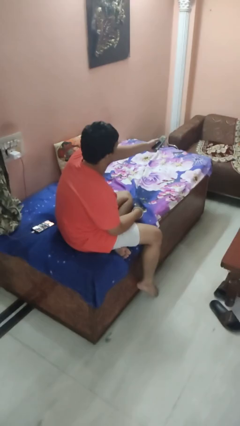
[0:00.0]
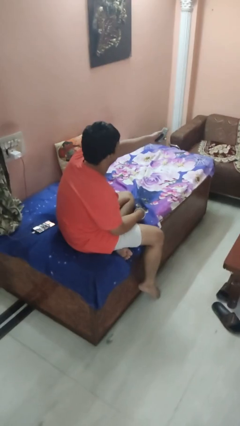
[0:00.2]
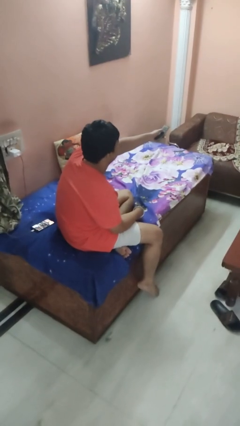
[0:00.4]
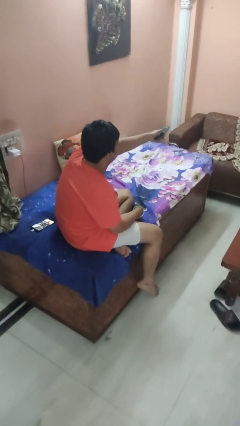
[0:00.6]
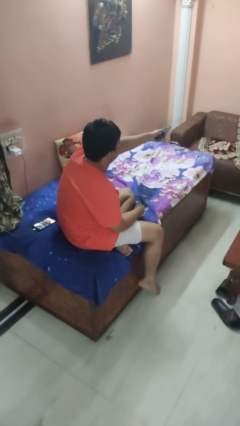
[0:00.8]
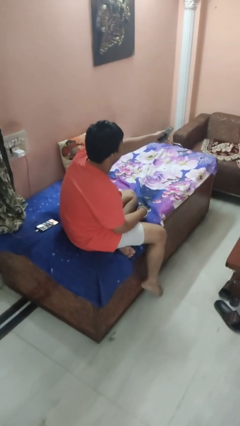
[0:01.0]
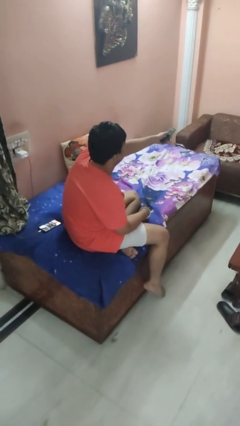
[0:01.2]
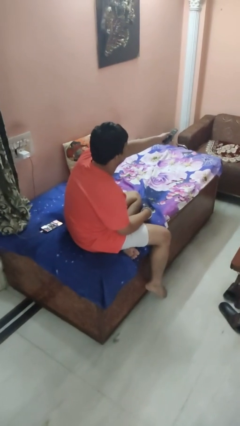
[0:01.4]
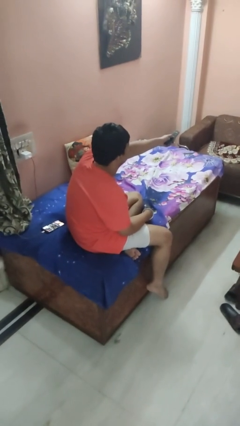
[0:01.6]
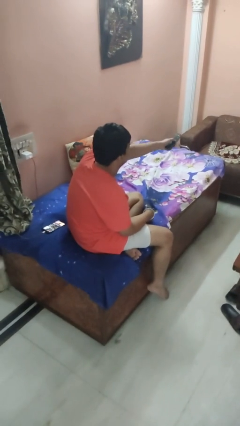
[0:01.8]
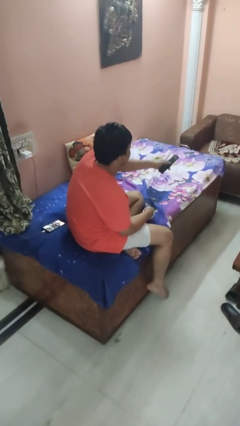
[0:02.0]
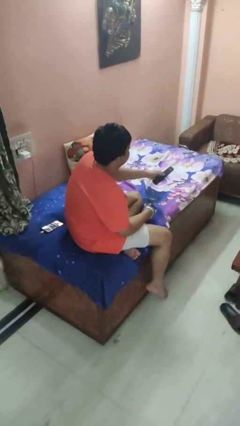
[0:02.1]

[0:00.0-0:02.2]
person uses television remote

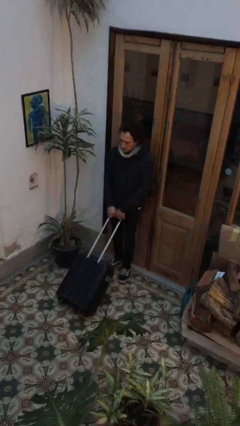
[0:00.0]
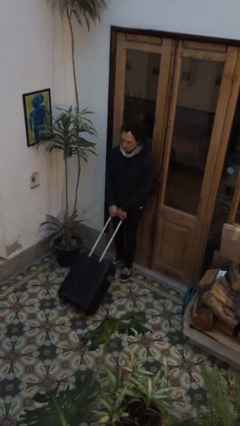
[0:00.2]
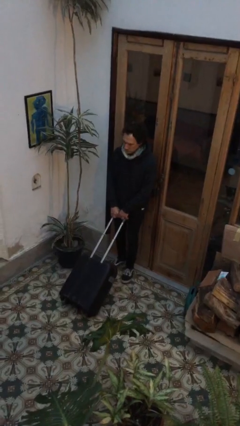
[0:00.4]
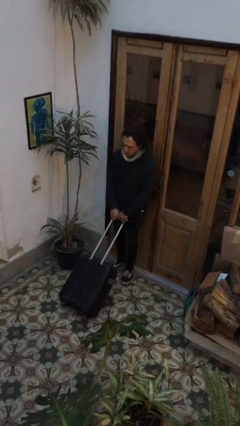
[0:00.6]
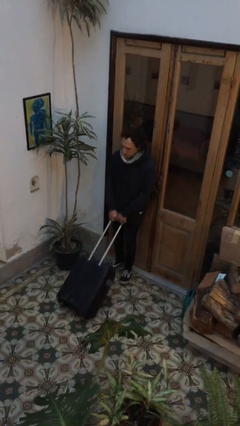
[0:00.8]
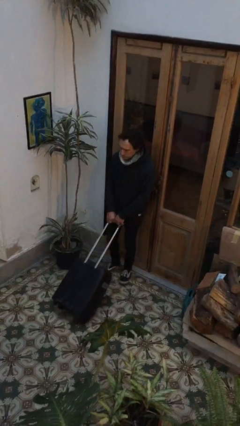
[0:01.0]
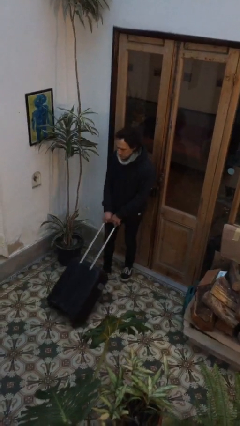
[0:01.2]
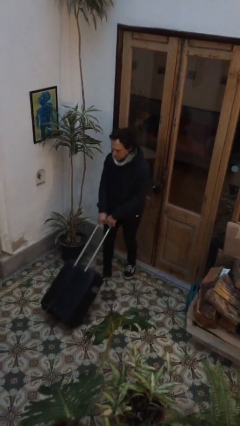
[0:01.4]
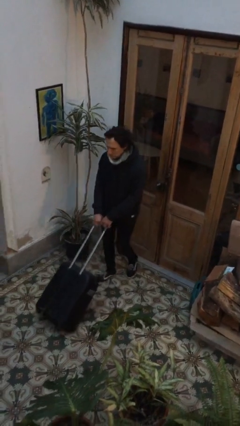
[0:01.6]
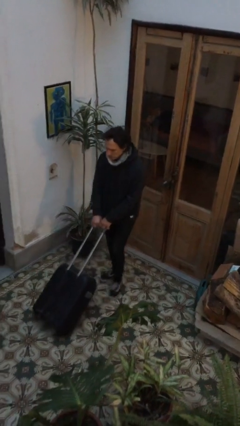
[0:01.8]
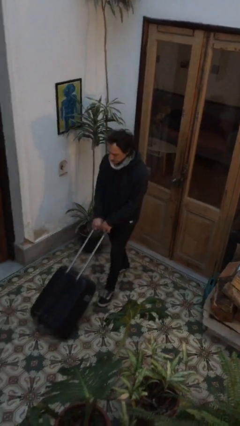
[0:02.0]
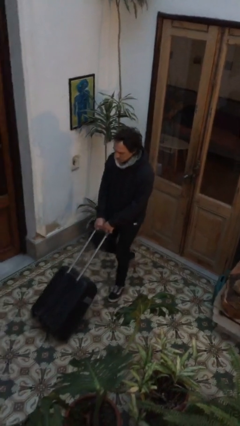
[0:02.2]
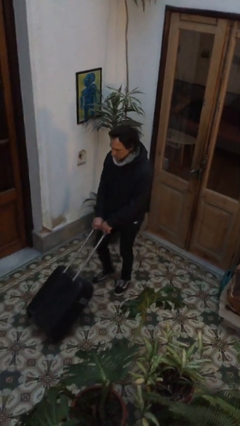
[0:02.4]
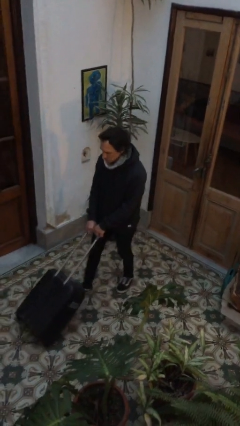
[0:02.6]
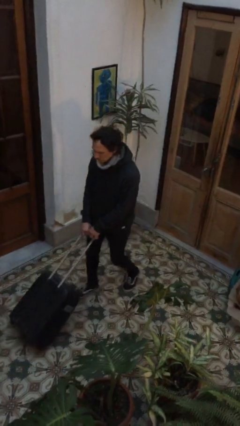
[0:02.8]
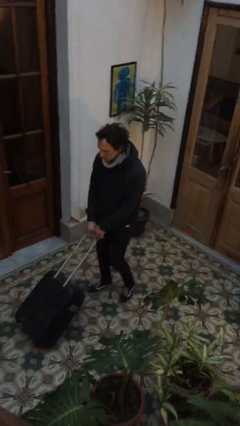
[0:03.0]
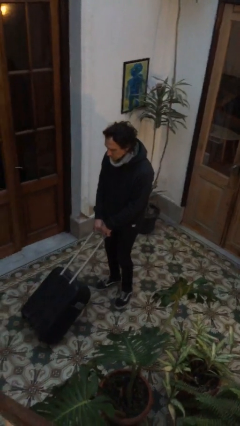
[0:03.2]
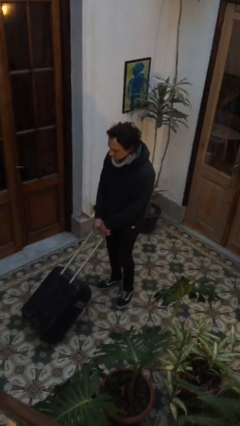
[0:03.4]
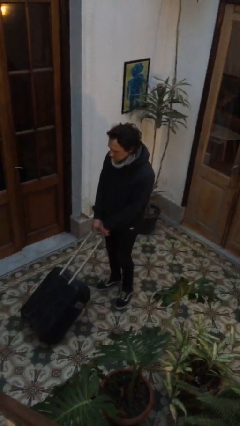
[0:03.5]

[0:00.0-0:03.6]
person pushes wheeled cart

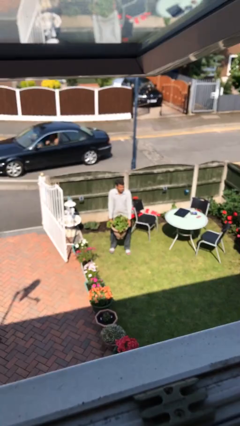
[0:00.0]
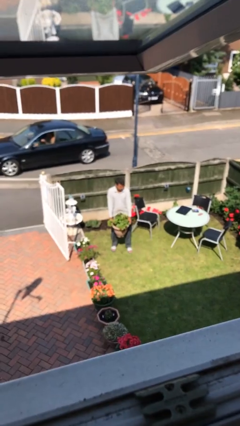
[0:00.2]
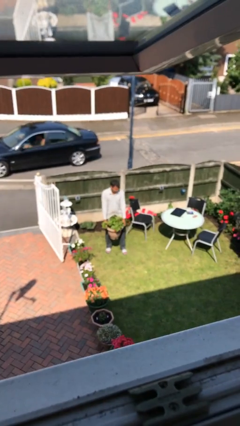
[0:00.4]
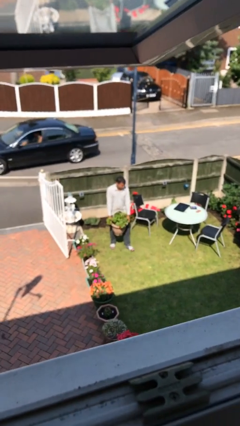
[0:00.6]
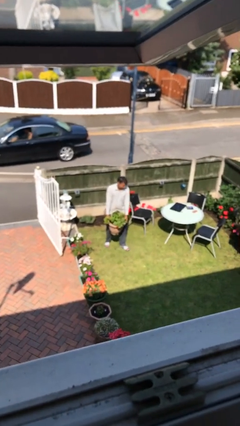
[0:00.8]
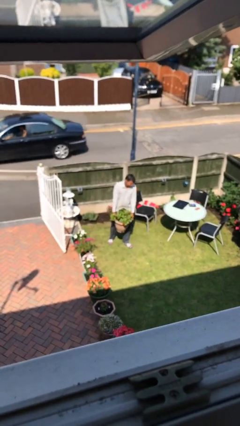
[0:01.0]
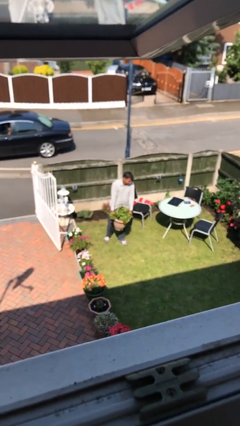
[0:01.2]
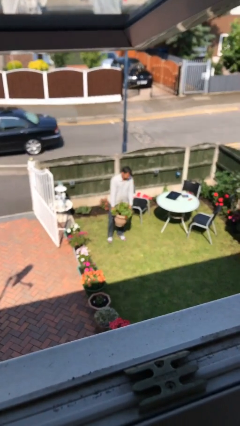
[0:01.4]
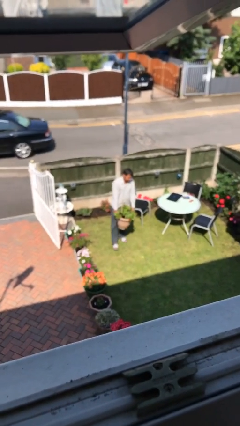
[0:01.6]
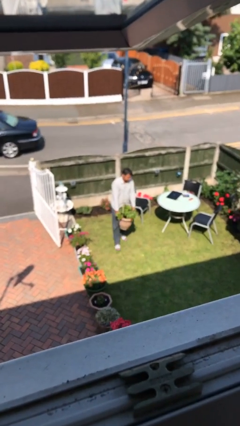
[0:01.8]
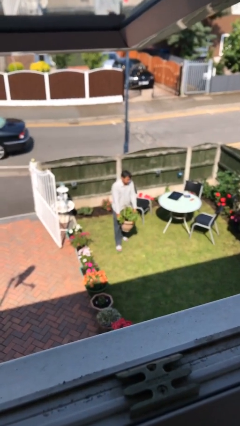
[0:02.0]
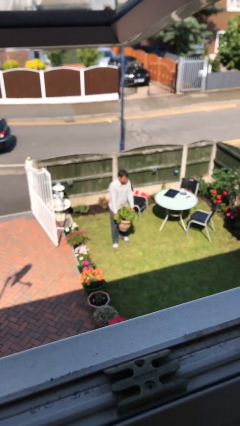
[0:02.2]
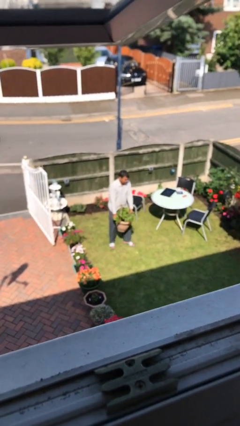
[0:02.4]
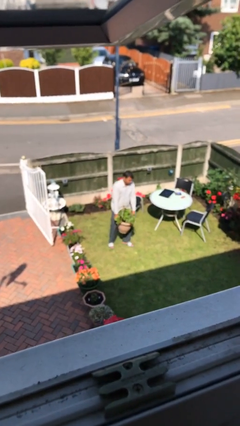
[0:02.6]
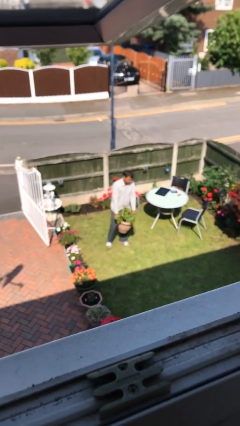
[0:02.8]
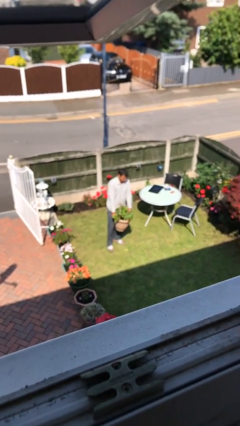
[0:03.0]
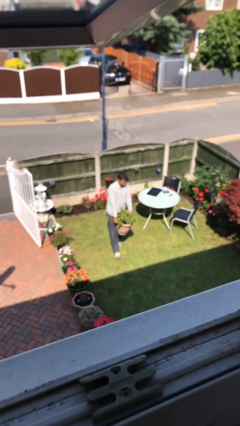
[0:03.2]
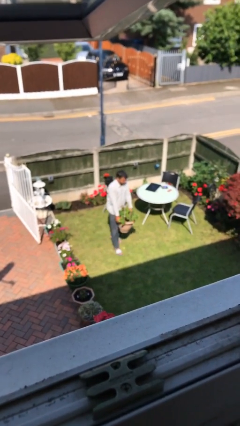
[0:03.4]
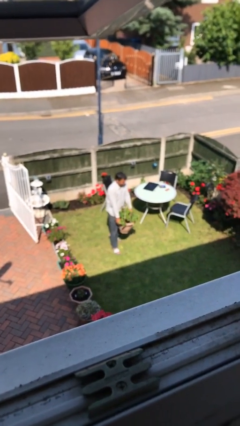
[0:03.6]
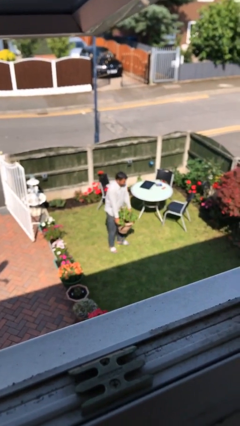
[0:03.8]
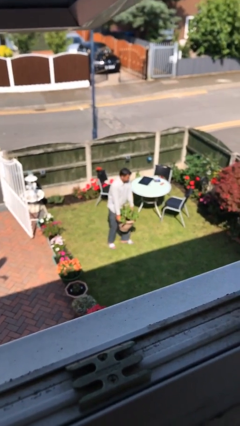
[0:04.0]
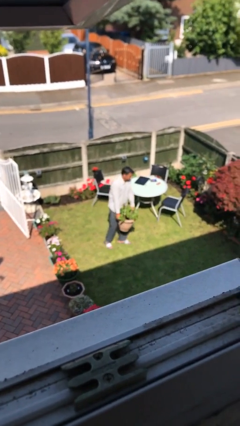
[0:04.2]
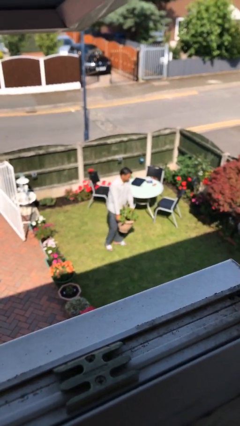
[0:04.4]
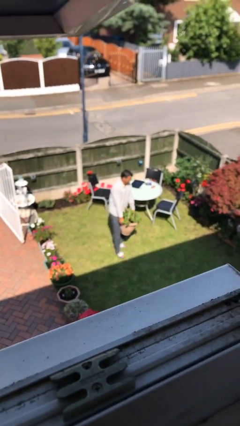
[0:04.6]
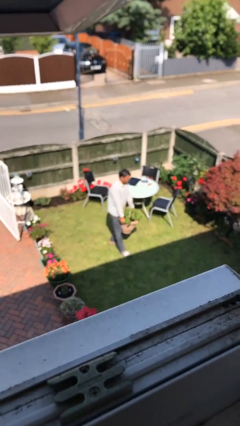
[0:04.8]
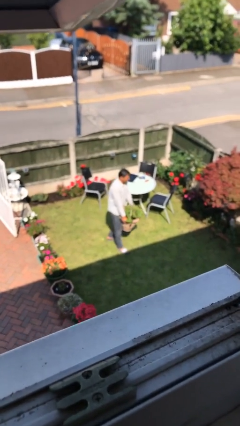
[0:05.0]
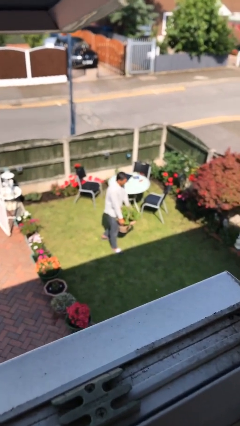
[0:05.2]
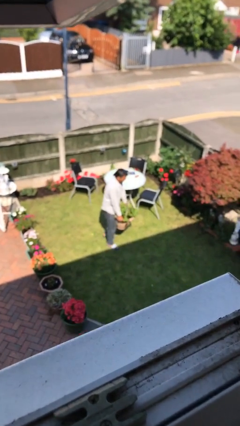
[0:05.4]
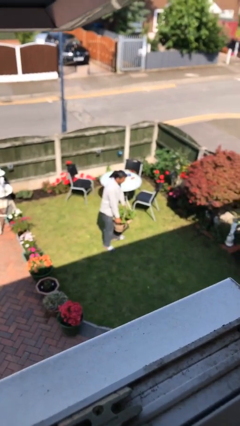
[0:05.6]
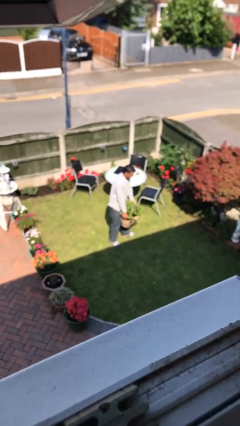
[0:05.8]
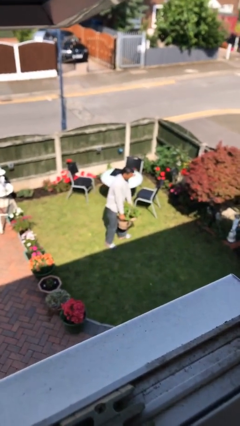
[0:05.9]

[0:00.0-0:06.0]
person carries heavy object

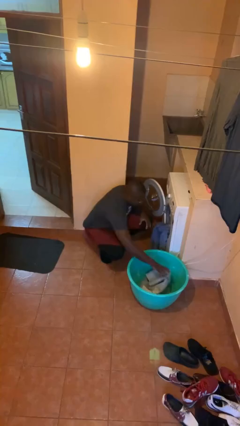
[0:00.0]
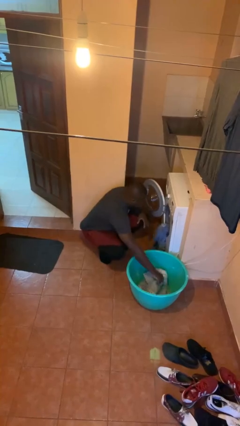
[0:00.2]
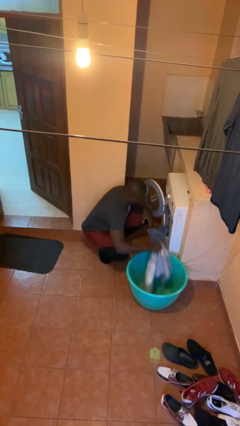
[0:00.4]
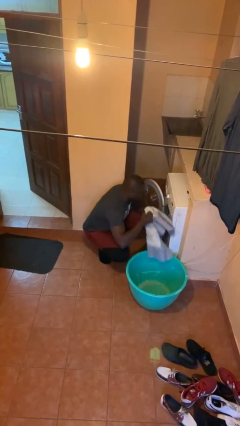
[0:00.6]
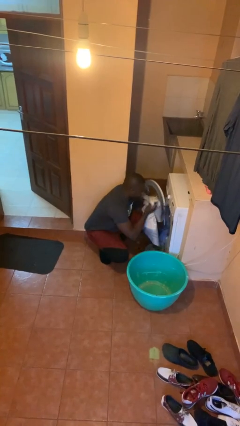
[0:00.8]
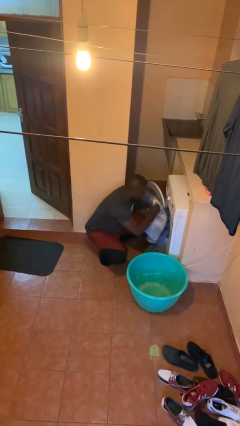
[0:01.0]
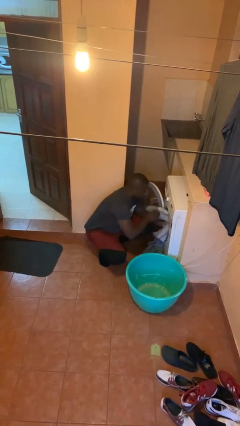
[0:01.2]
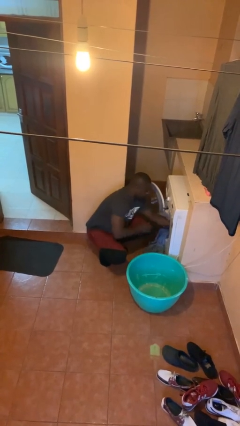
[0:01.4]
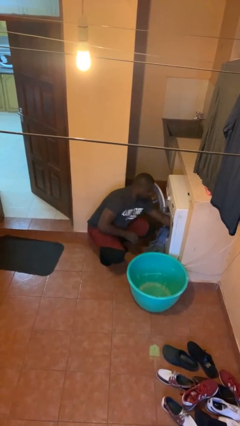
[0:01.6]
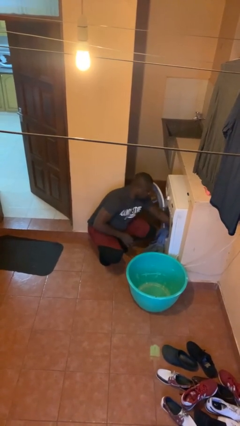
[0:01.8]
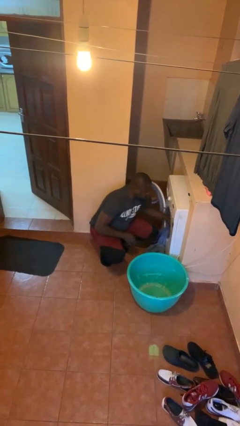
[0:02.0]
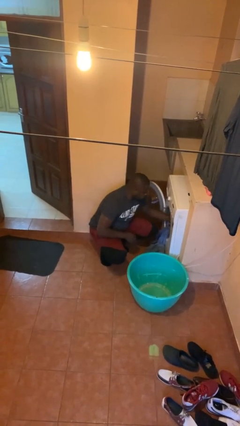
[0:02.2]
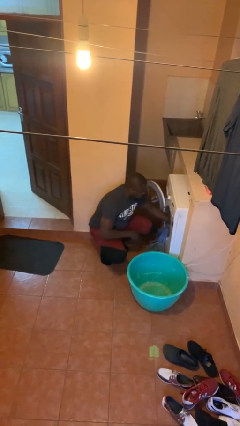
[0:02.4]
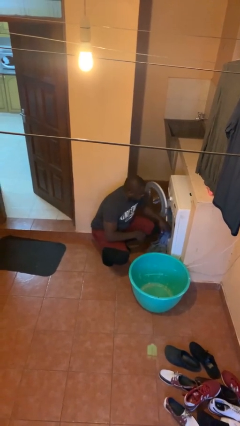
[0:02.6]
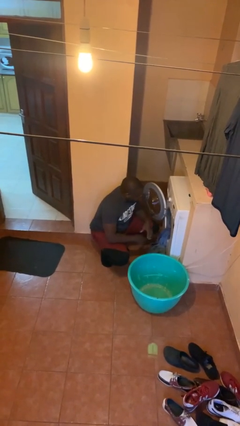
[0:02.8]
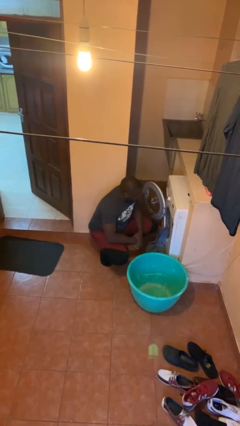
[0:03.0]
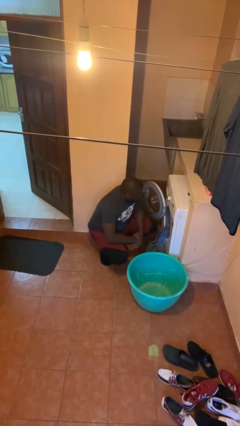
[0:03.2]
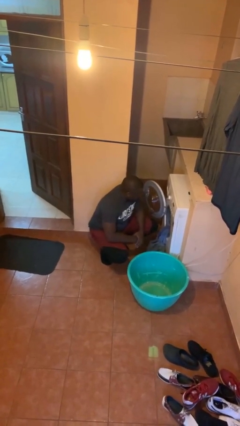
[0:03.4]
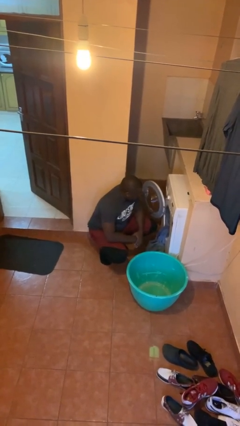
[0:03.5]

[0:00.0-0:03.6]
person loads clotheswasher

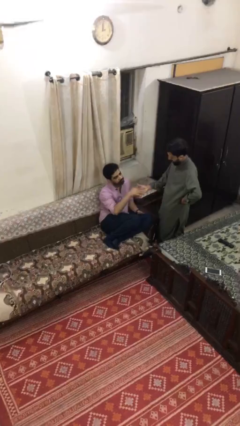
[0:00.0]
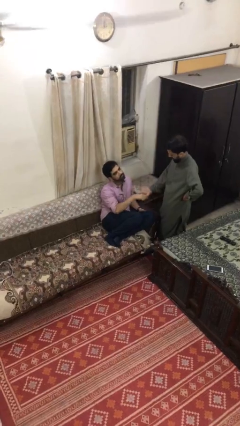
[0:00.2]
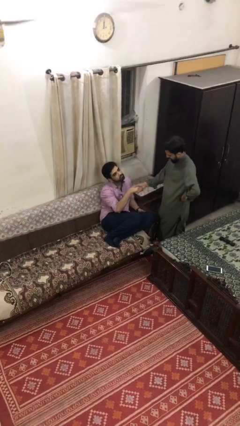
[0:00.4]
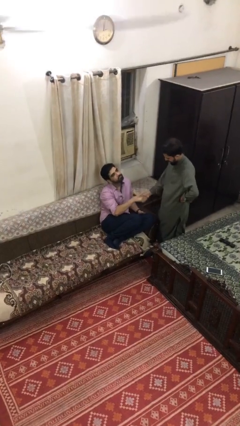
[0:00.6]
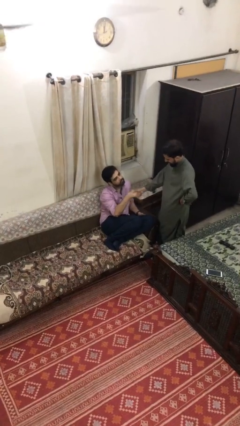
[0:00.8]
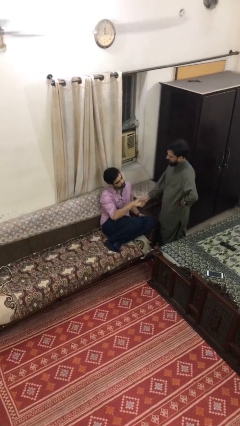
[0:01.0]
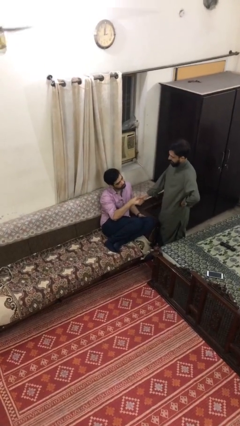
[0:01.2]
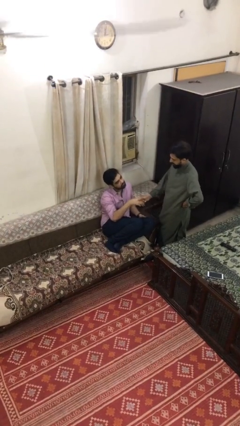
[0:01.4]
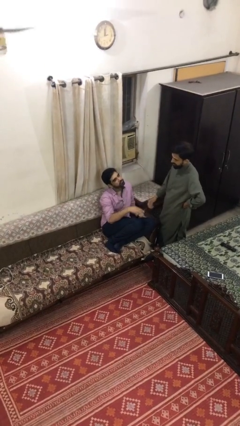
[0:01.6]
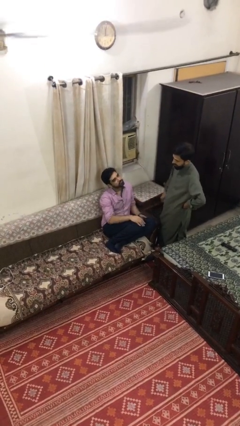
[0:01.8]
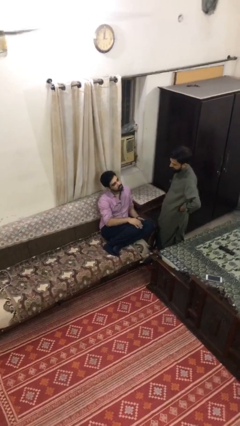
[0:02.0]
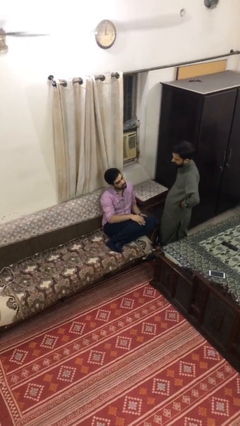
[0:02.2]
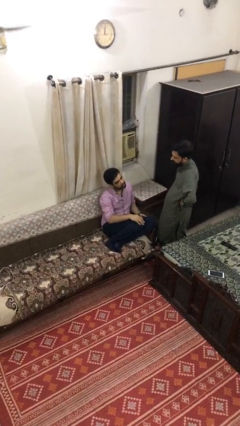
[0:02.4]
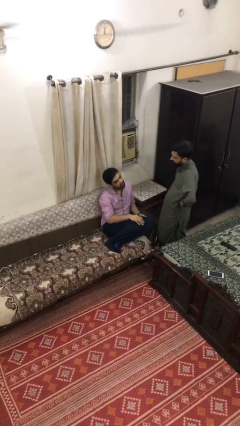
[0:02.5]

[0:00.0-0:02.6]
person shakes hand
